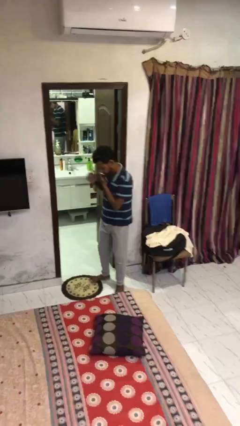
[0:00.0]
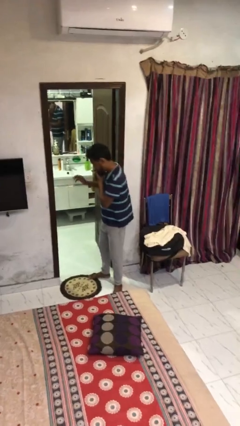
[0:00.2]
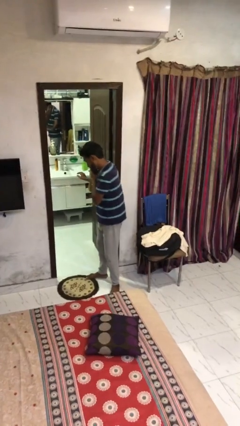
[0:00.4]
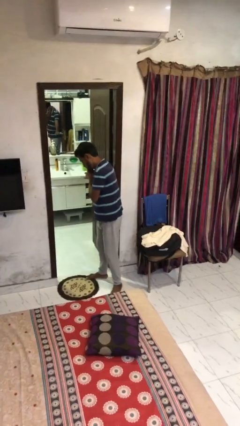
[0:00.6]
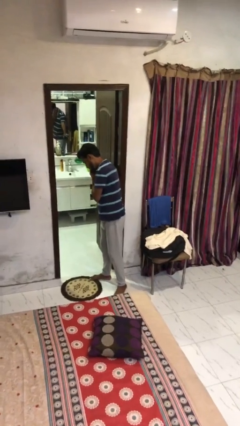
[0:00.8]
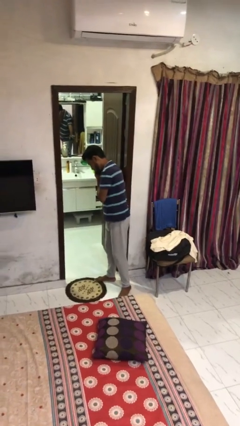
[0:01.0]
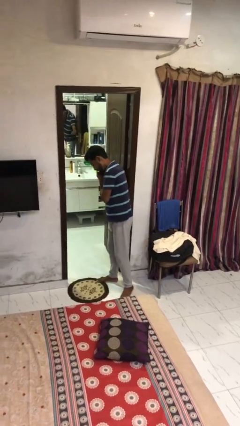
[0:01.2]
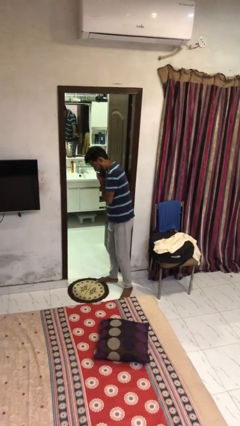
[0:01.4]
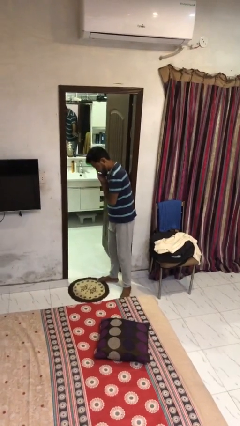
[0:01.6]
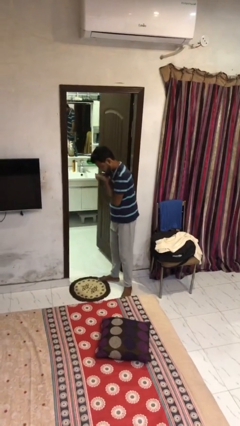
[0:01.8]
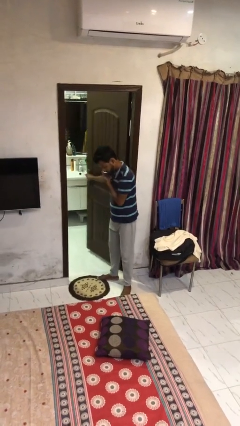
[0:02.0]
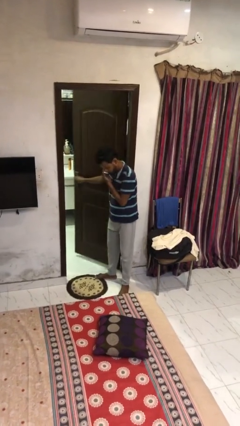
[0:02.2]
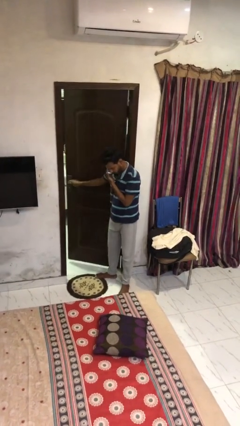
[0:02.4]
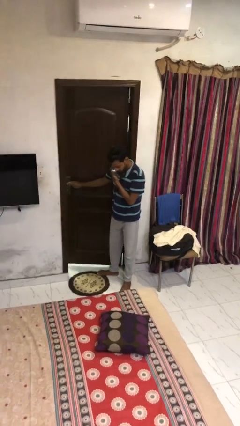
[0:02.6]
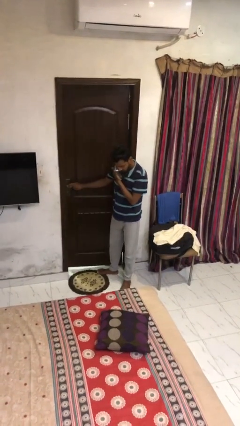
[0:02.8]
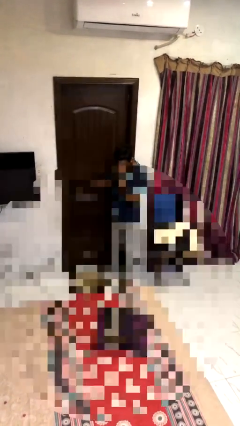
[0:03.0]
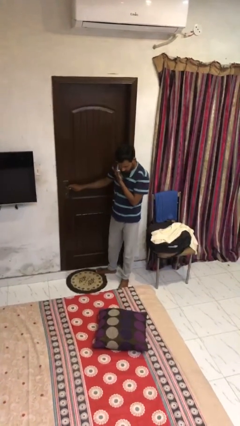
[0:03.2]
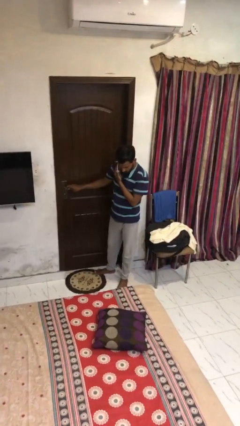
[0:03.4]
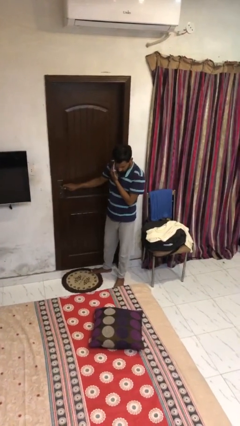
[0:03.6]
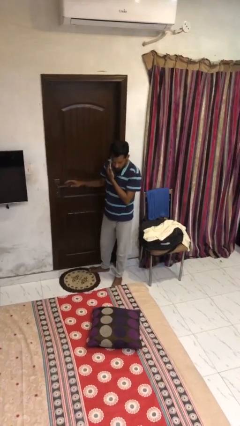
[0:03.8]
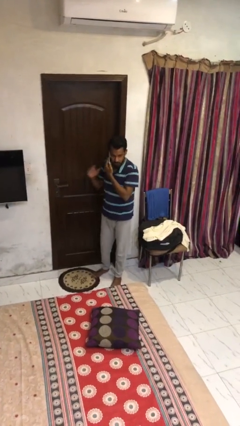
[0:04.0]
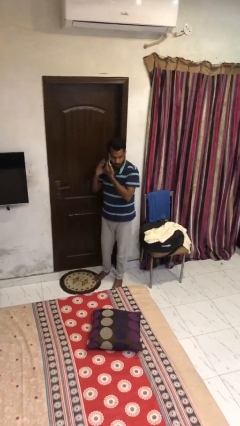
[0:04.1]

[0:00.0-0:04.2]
person closes facility door

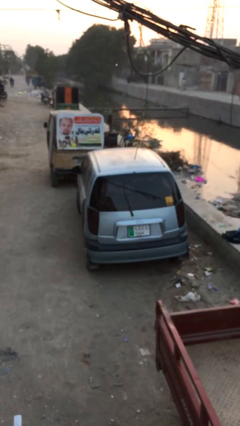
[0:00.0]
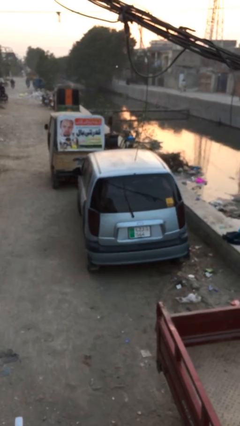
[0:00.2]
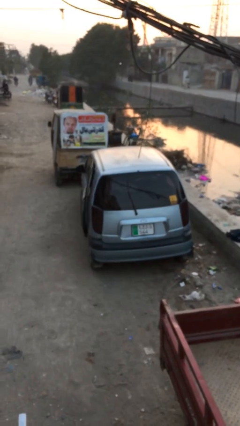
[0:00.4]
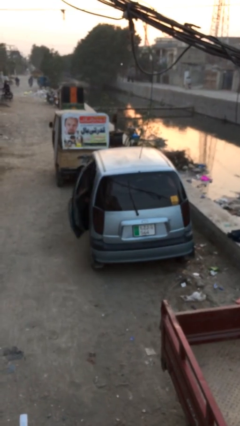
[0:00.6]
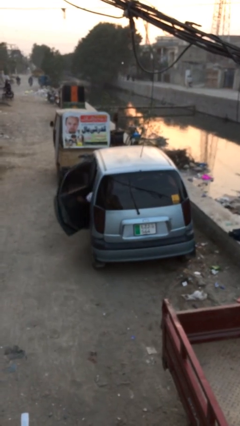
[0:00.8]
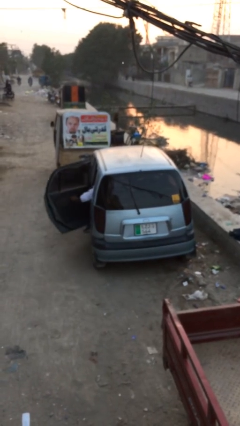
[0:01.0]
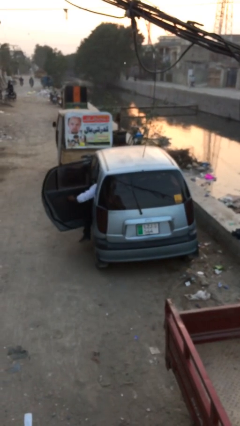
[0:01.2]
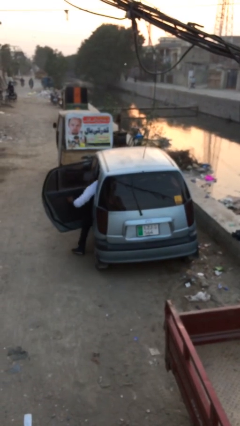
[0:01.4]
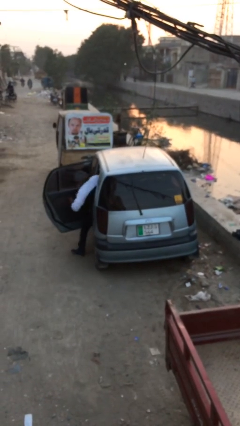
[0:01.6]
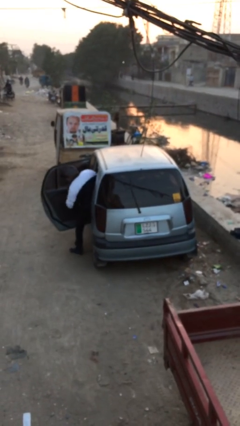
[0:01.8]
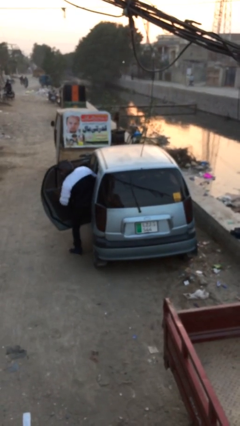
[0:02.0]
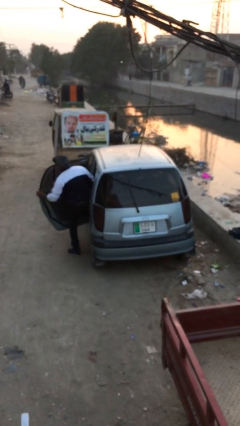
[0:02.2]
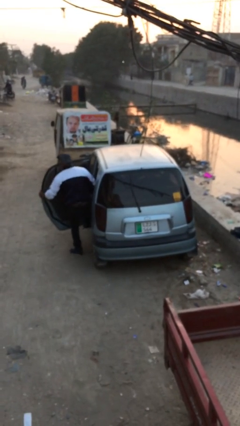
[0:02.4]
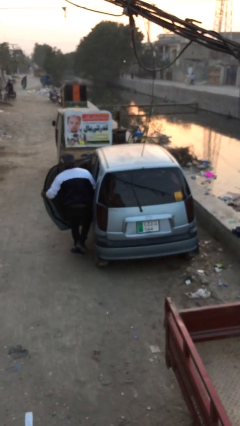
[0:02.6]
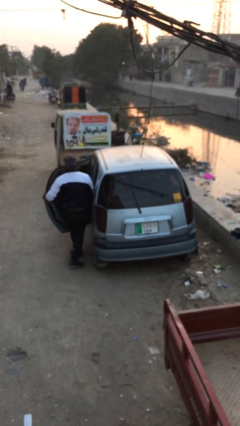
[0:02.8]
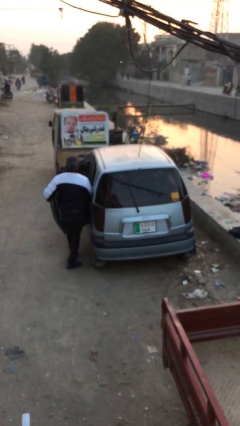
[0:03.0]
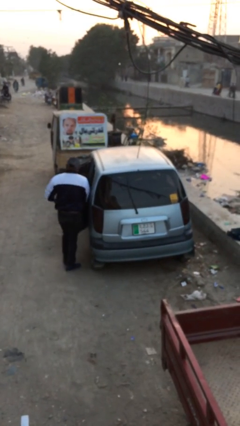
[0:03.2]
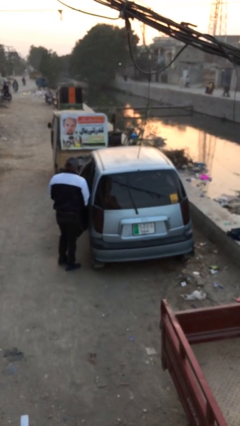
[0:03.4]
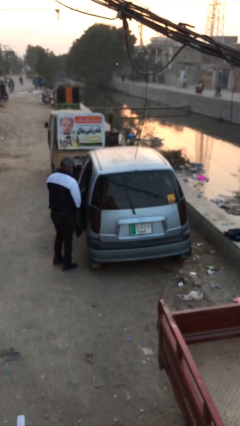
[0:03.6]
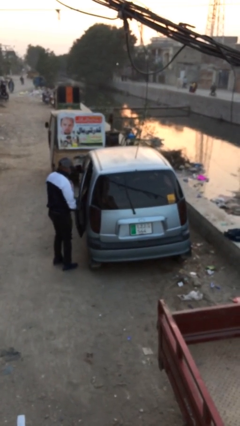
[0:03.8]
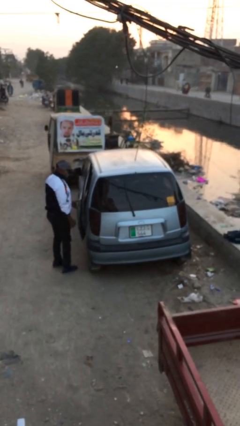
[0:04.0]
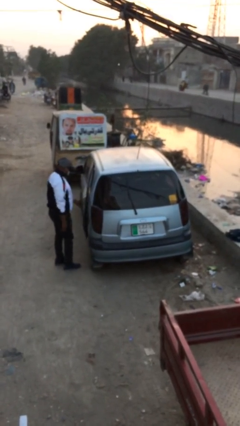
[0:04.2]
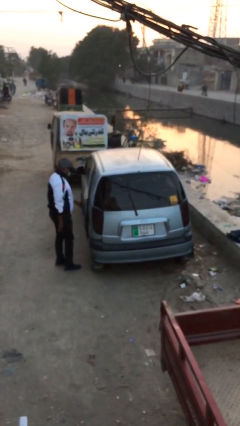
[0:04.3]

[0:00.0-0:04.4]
car drops off person

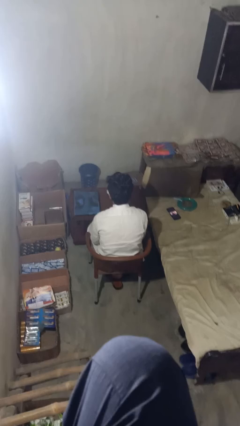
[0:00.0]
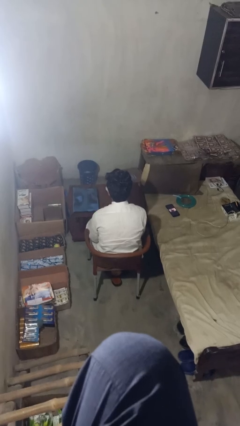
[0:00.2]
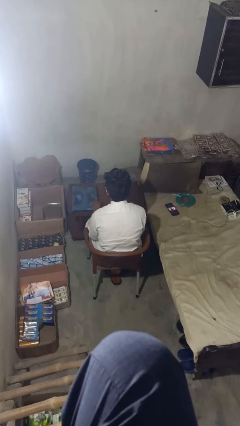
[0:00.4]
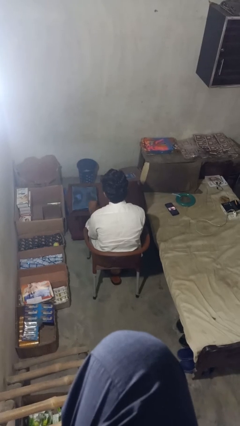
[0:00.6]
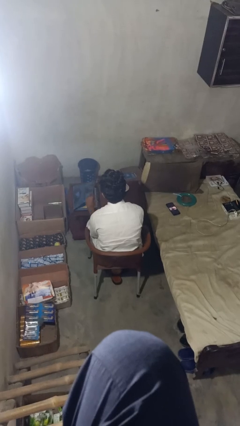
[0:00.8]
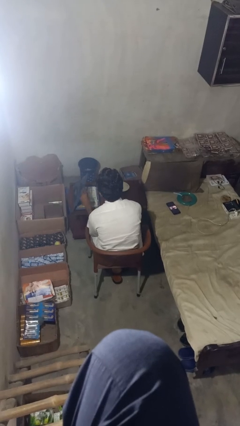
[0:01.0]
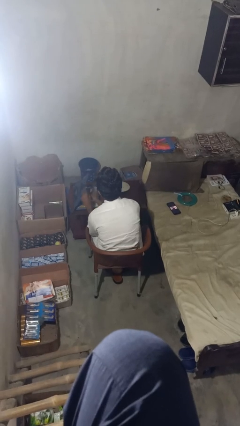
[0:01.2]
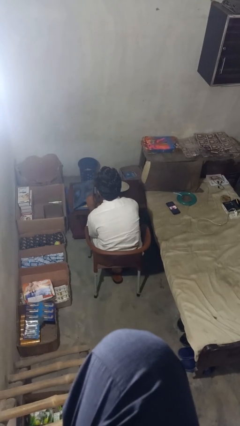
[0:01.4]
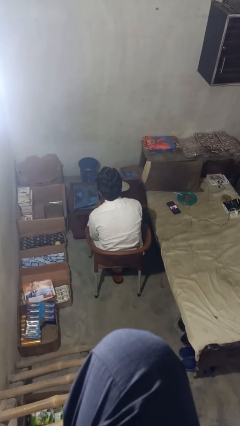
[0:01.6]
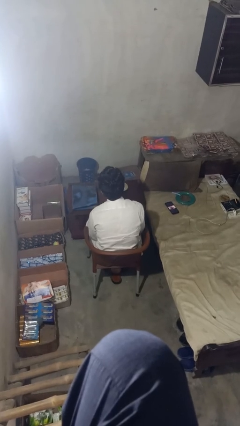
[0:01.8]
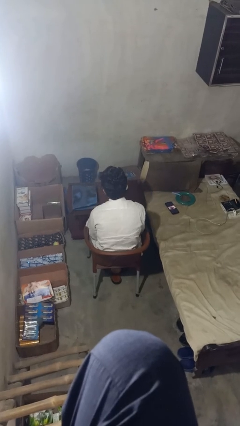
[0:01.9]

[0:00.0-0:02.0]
person takes object from bag

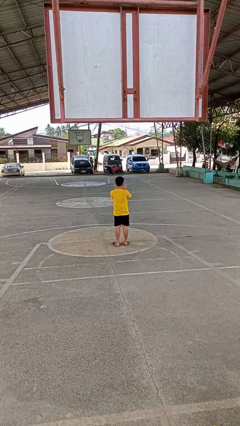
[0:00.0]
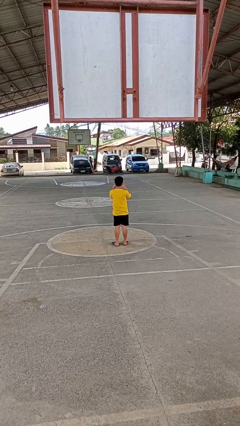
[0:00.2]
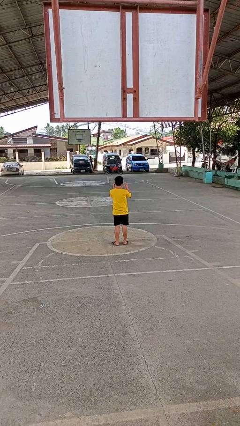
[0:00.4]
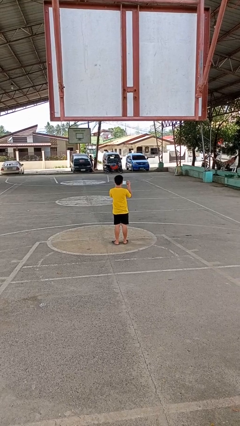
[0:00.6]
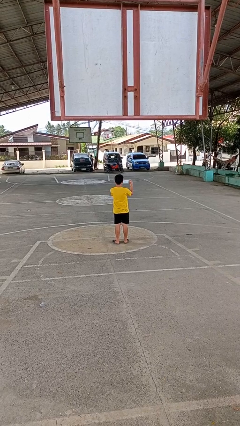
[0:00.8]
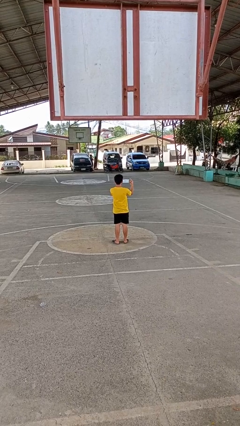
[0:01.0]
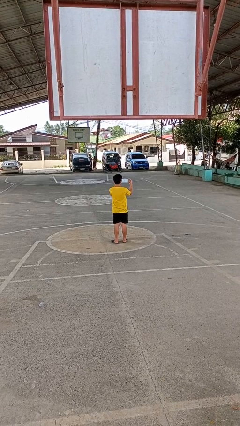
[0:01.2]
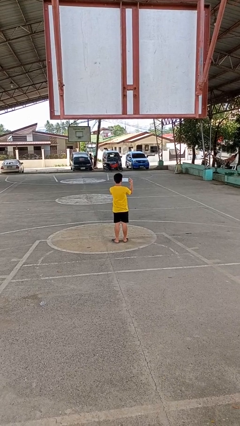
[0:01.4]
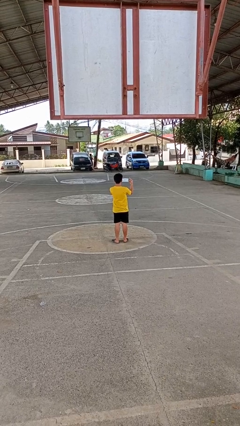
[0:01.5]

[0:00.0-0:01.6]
person takes off facemask

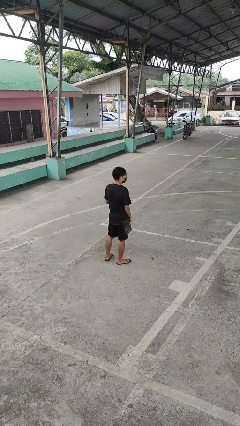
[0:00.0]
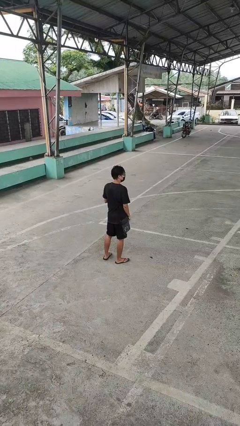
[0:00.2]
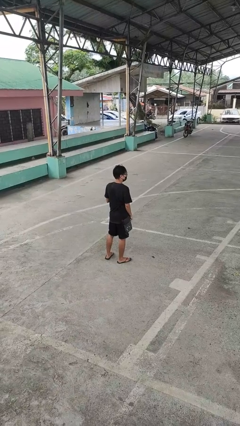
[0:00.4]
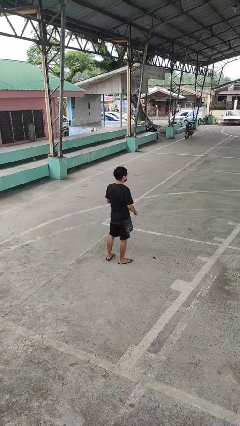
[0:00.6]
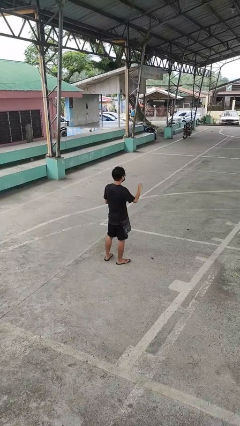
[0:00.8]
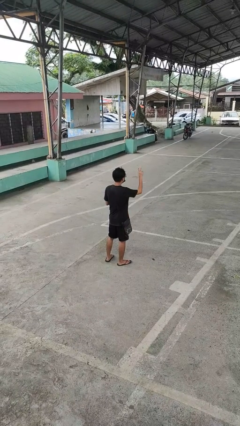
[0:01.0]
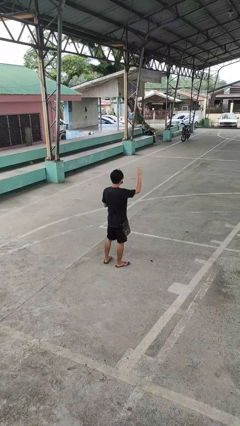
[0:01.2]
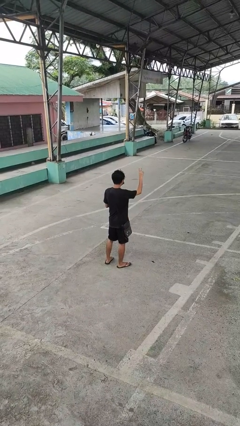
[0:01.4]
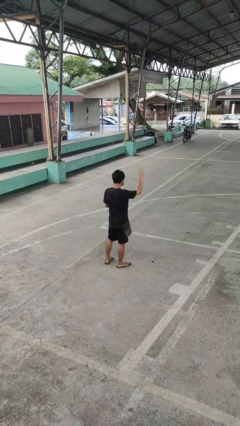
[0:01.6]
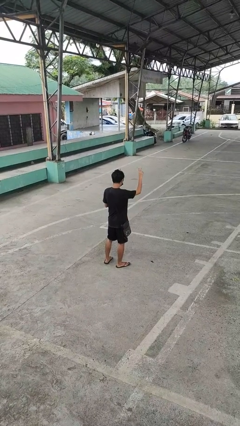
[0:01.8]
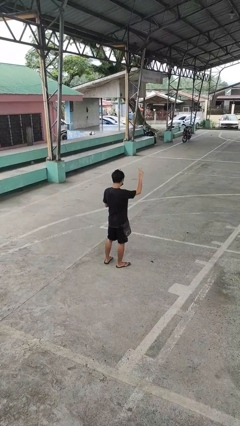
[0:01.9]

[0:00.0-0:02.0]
person gestures peace

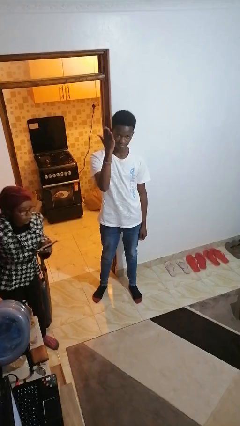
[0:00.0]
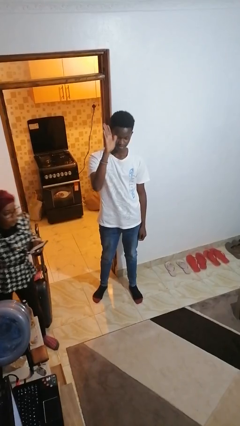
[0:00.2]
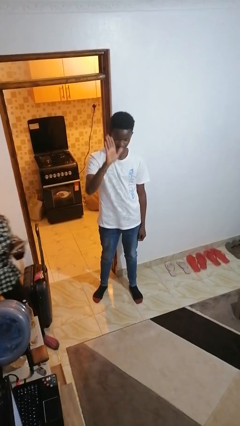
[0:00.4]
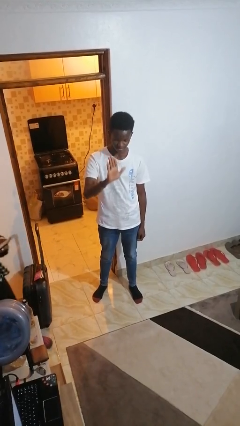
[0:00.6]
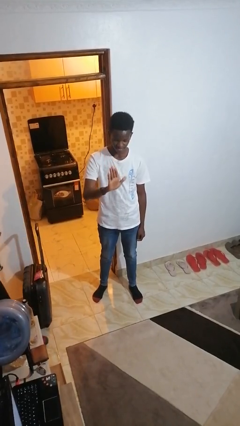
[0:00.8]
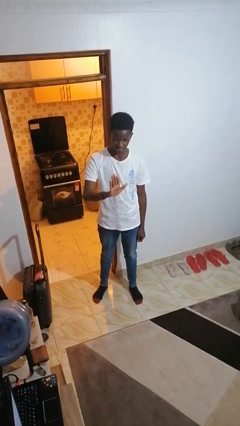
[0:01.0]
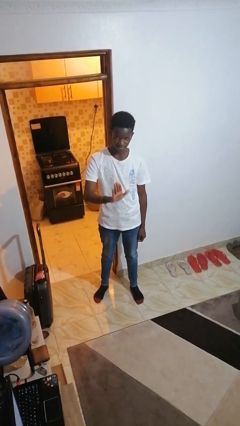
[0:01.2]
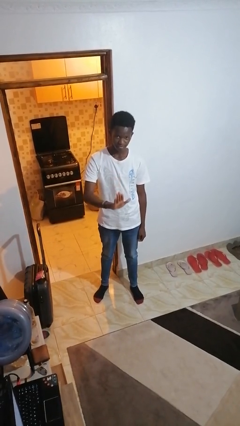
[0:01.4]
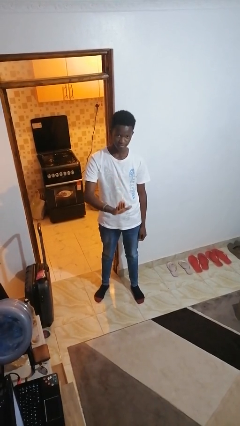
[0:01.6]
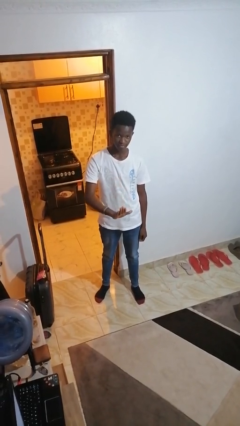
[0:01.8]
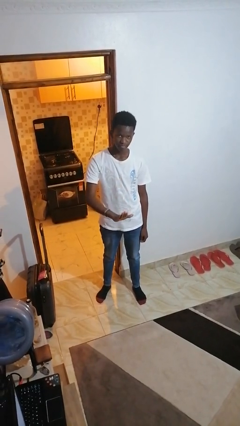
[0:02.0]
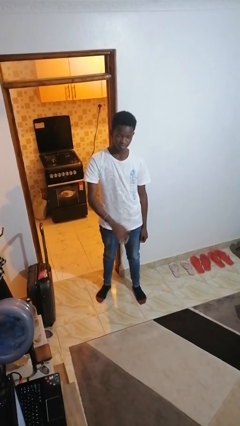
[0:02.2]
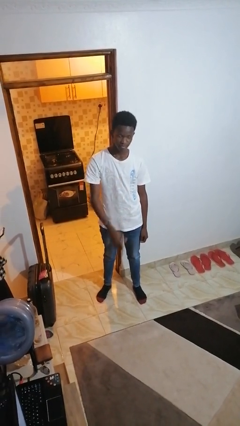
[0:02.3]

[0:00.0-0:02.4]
person gestures swipe down

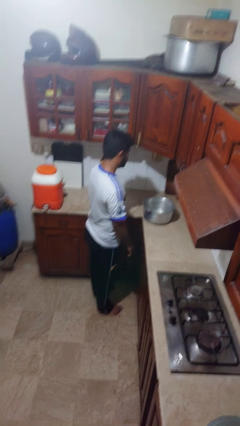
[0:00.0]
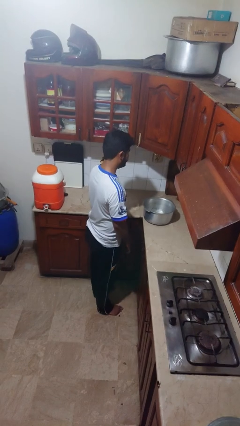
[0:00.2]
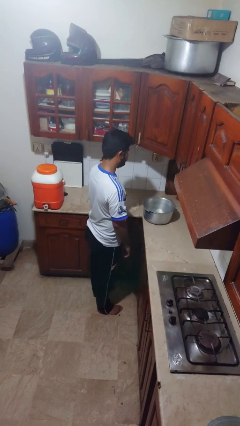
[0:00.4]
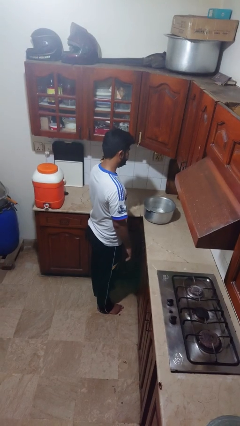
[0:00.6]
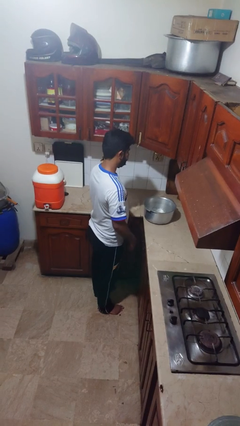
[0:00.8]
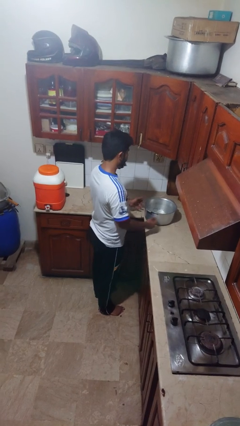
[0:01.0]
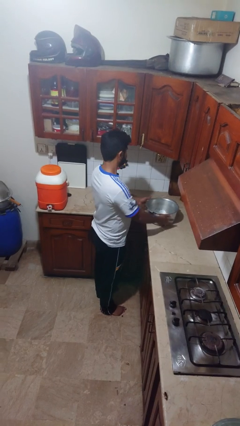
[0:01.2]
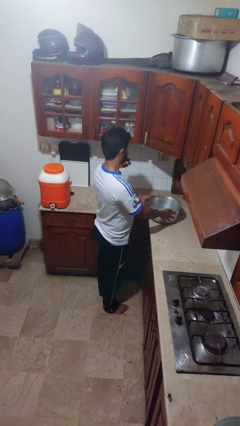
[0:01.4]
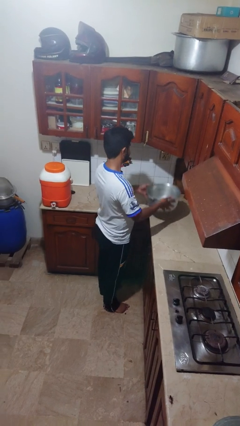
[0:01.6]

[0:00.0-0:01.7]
person picks up object from countertop
